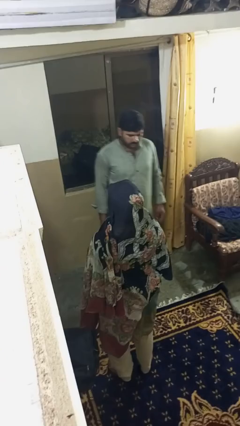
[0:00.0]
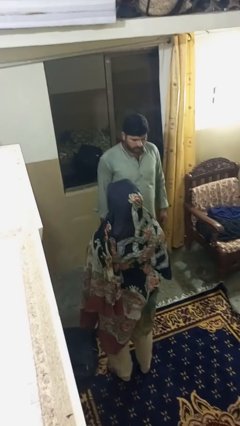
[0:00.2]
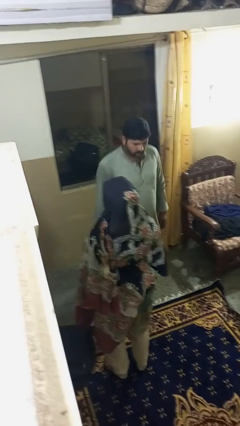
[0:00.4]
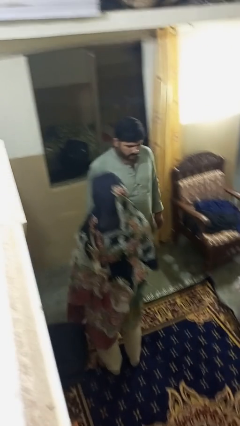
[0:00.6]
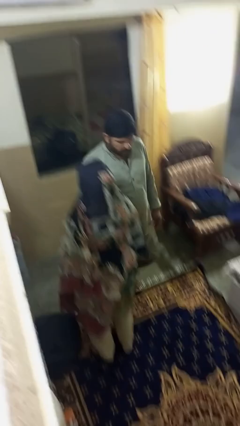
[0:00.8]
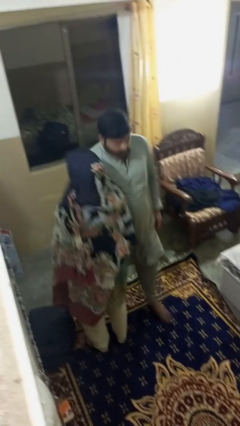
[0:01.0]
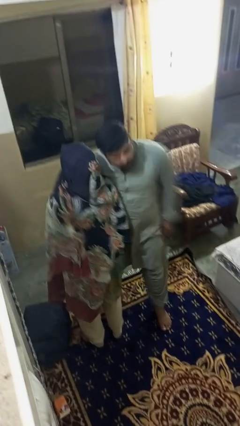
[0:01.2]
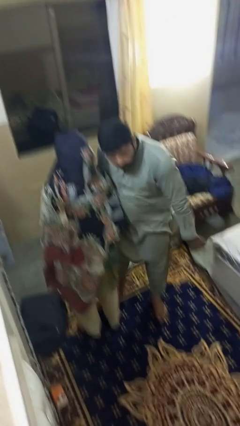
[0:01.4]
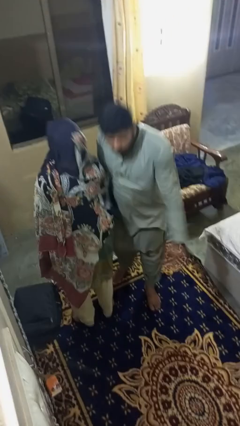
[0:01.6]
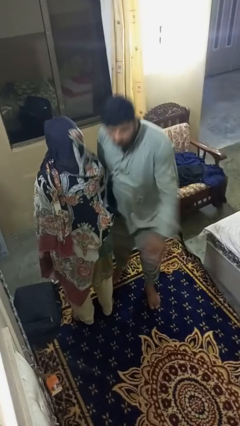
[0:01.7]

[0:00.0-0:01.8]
person bumps into person

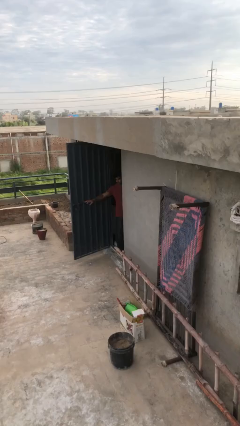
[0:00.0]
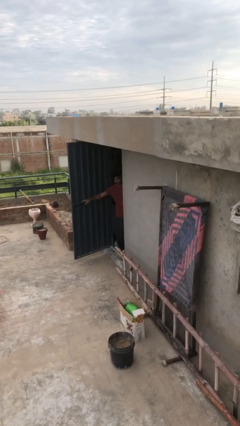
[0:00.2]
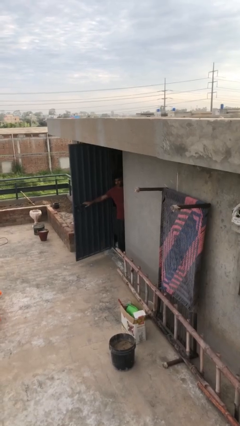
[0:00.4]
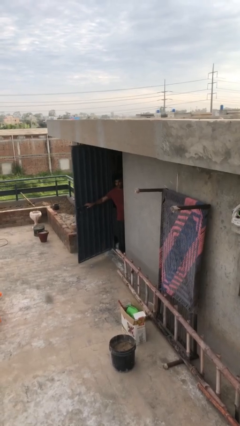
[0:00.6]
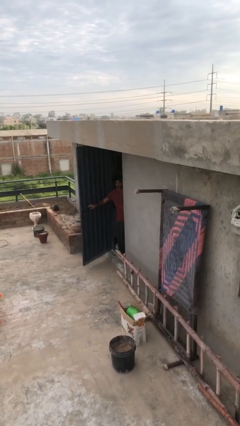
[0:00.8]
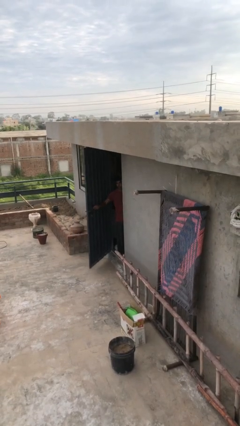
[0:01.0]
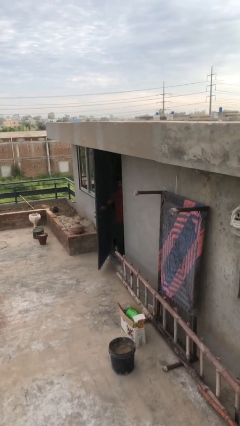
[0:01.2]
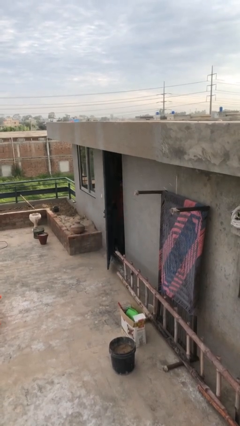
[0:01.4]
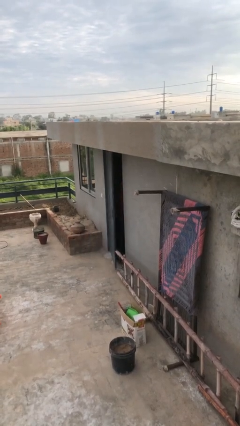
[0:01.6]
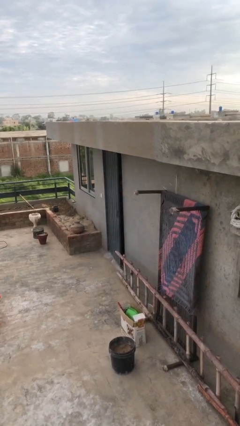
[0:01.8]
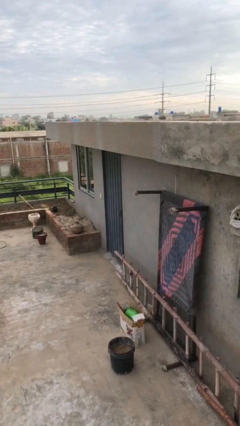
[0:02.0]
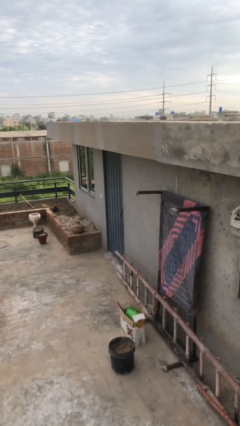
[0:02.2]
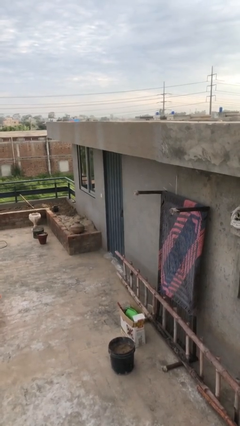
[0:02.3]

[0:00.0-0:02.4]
person closes facility door

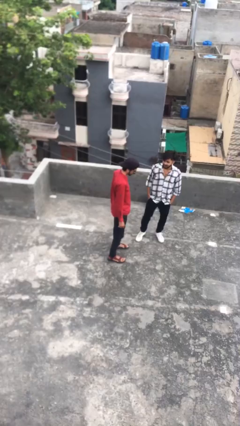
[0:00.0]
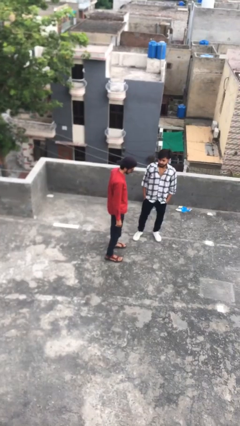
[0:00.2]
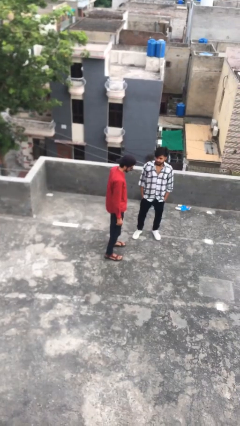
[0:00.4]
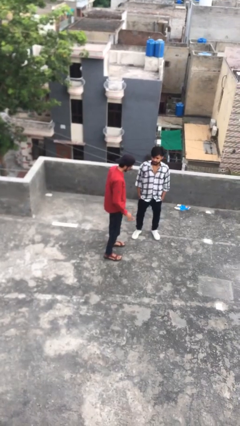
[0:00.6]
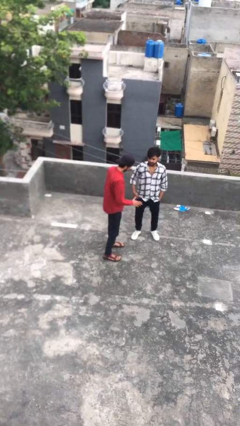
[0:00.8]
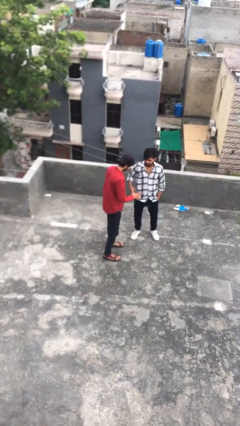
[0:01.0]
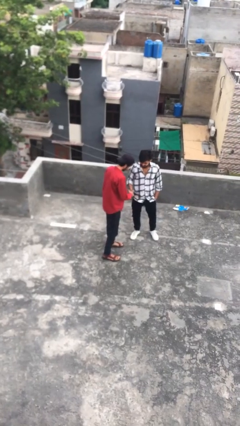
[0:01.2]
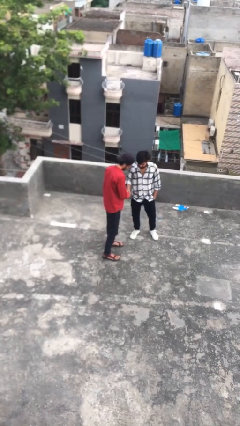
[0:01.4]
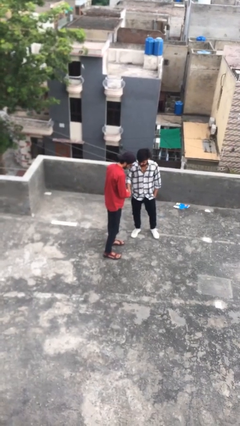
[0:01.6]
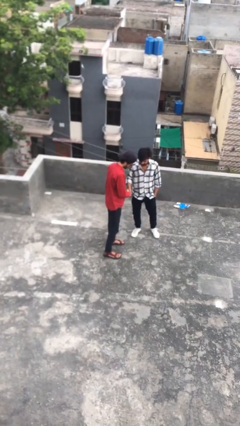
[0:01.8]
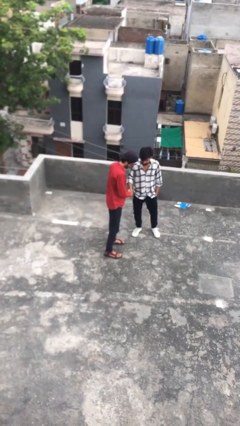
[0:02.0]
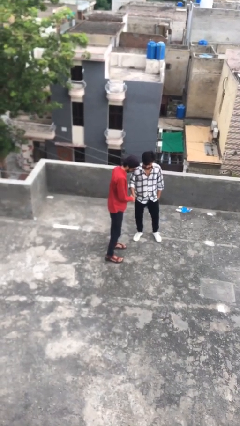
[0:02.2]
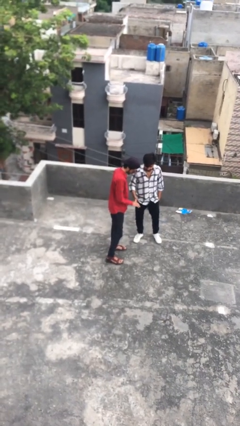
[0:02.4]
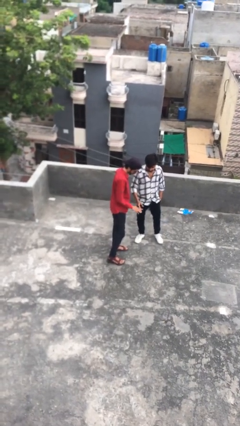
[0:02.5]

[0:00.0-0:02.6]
person shakes hand

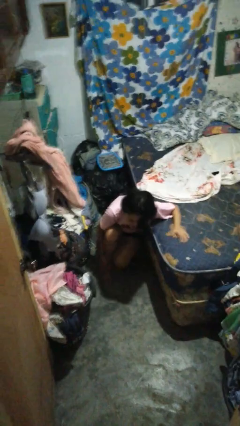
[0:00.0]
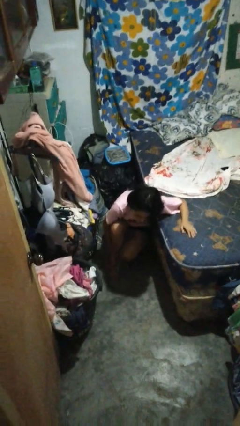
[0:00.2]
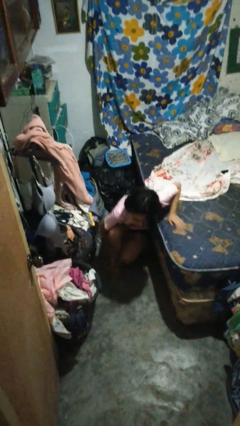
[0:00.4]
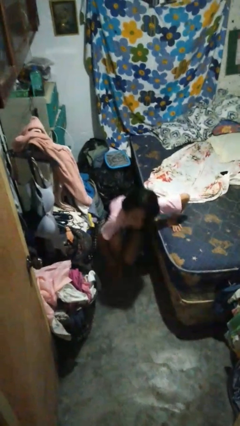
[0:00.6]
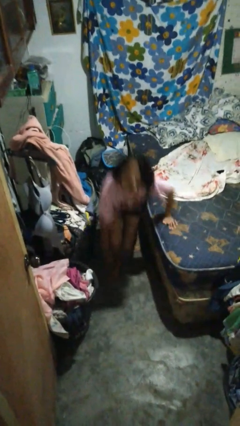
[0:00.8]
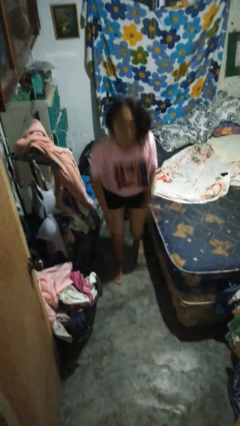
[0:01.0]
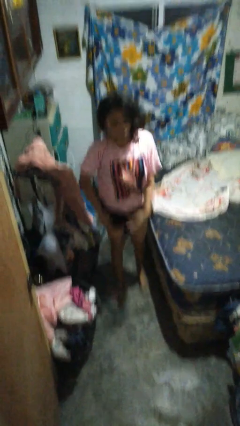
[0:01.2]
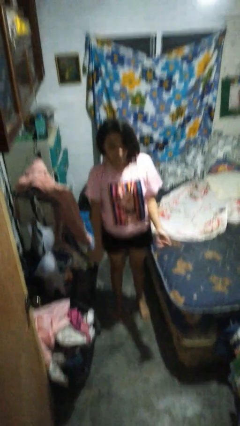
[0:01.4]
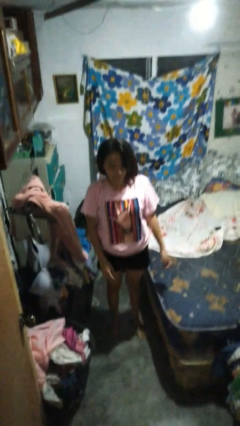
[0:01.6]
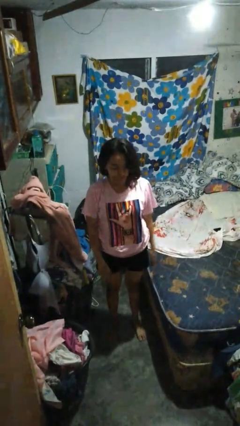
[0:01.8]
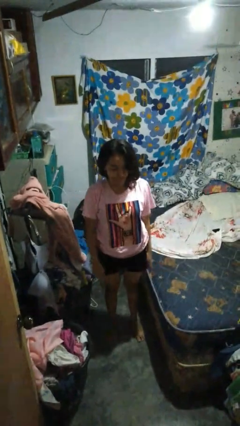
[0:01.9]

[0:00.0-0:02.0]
person stands up from floor

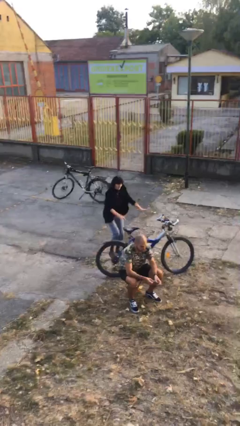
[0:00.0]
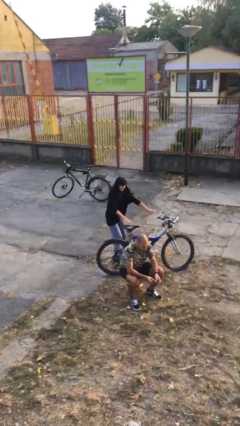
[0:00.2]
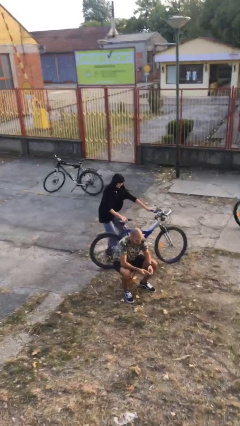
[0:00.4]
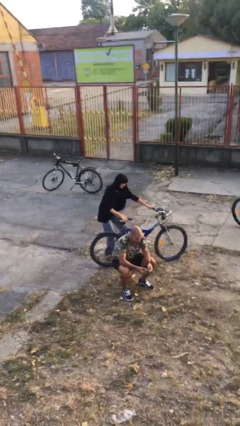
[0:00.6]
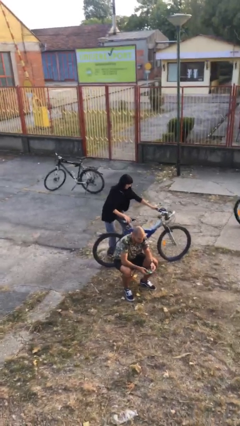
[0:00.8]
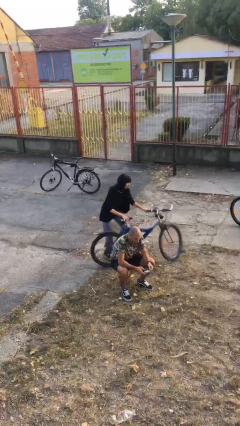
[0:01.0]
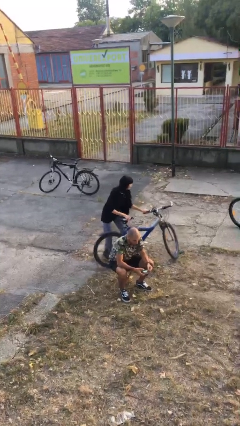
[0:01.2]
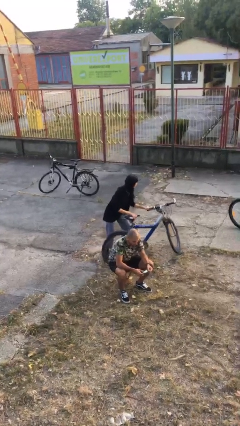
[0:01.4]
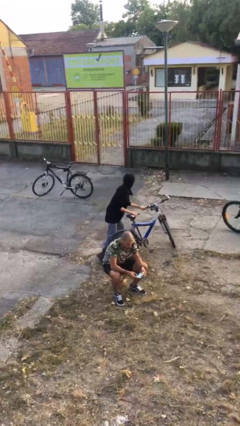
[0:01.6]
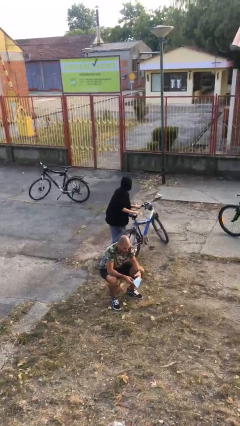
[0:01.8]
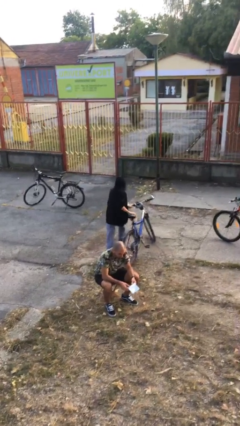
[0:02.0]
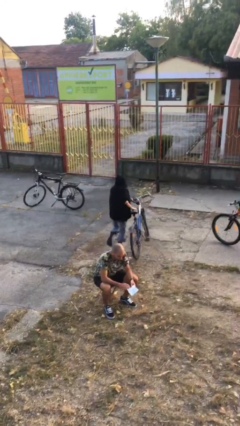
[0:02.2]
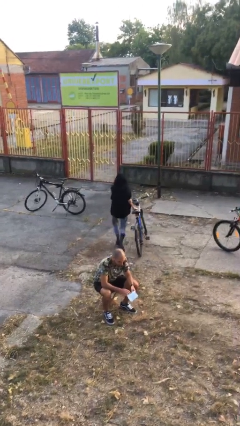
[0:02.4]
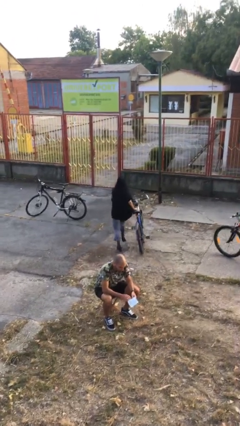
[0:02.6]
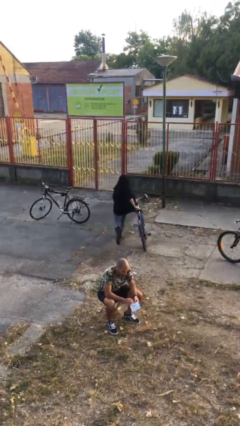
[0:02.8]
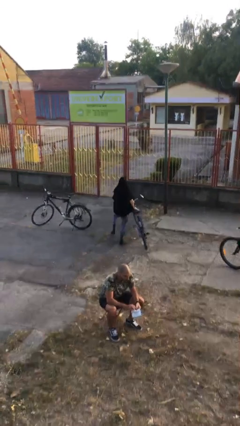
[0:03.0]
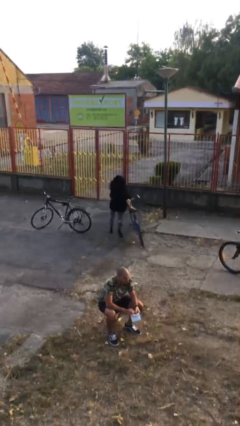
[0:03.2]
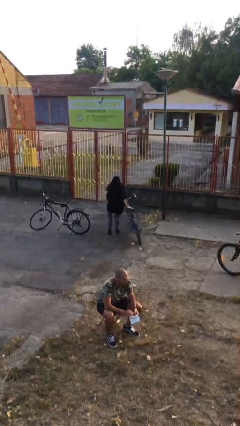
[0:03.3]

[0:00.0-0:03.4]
person steals object from person

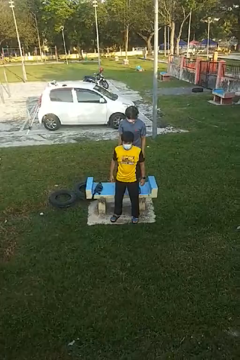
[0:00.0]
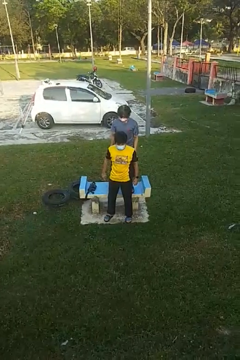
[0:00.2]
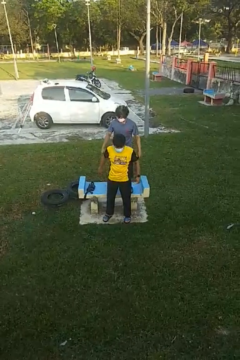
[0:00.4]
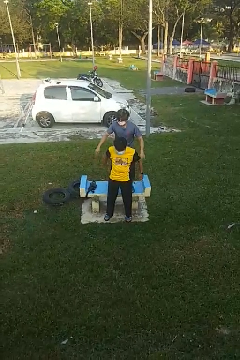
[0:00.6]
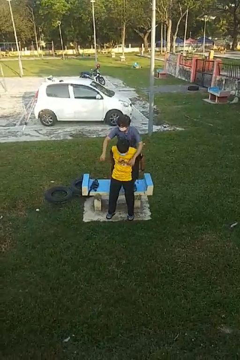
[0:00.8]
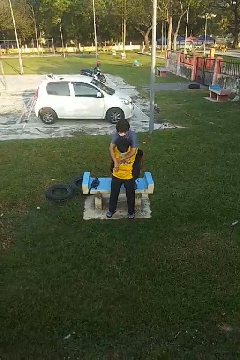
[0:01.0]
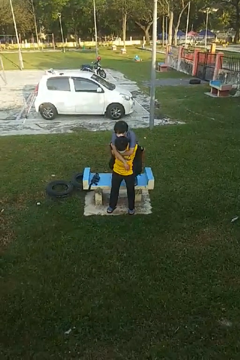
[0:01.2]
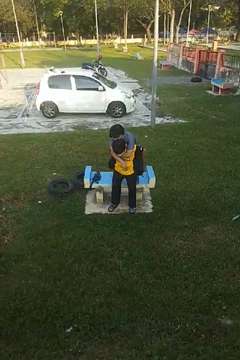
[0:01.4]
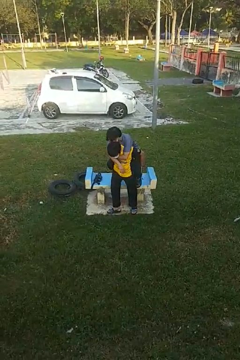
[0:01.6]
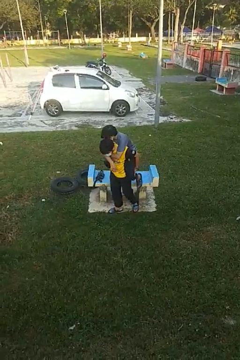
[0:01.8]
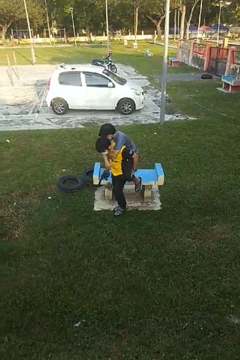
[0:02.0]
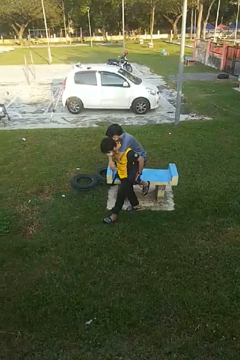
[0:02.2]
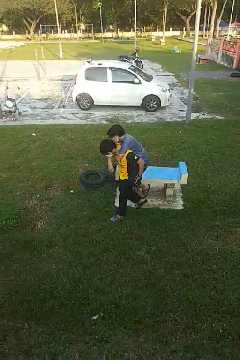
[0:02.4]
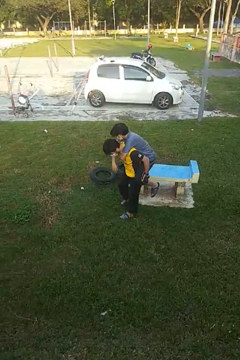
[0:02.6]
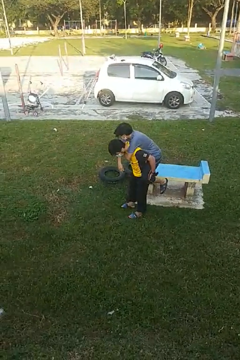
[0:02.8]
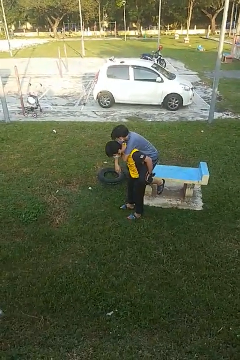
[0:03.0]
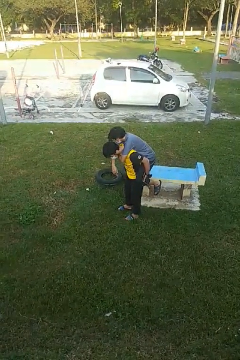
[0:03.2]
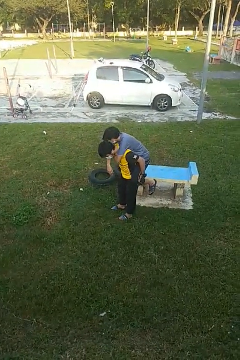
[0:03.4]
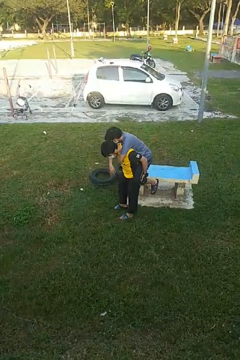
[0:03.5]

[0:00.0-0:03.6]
person carries person over shoulder

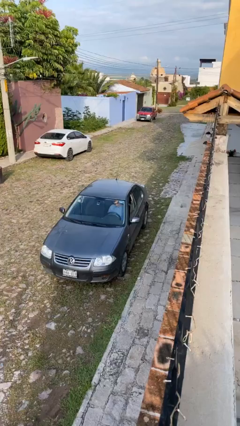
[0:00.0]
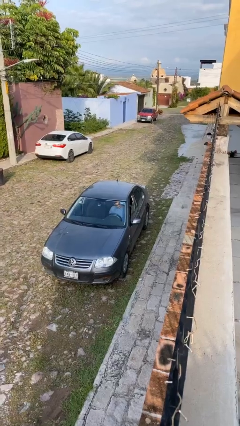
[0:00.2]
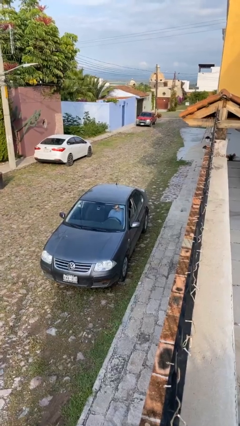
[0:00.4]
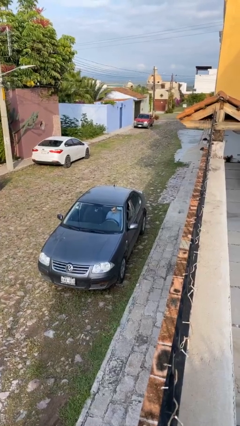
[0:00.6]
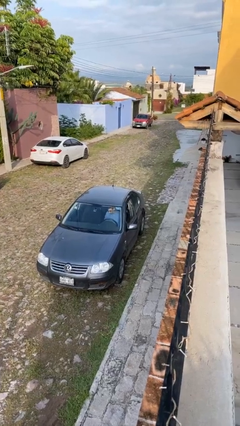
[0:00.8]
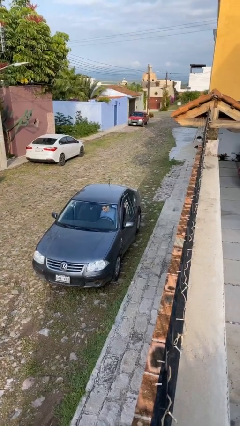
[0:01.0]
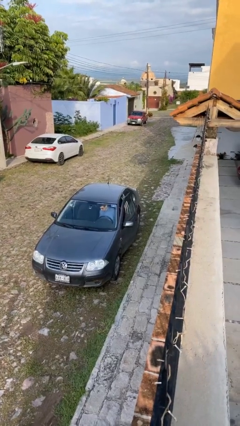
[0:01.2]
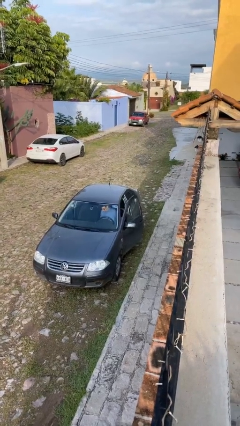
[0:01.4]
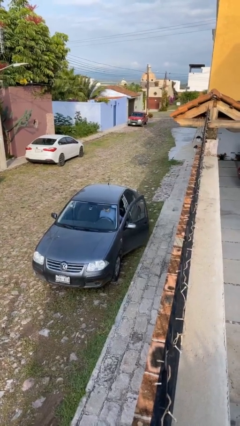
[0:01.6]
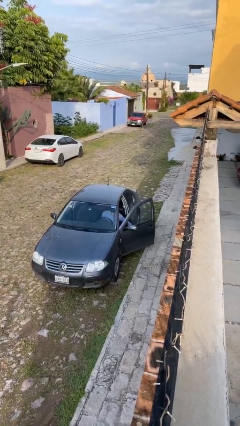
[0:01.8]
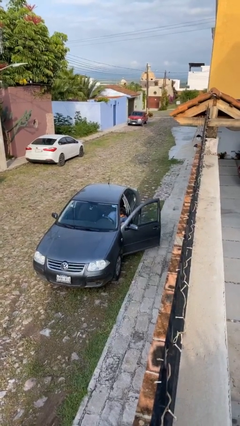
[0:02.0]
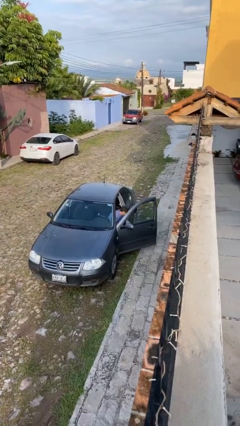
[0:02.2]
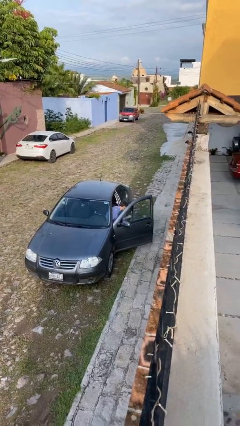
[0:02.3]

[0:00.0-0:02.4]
person opens car door
